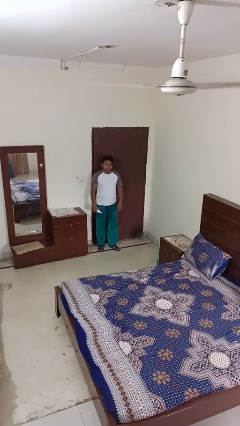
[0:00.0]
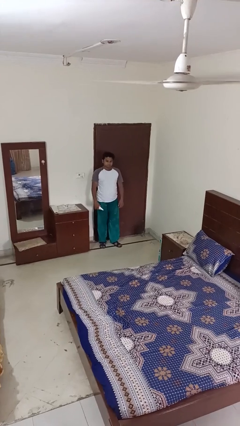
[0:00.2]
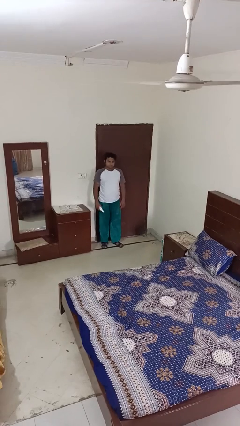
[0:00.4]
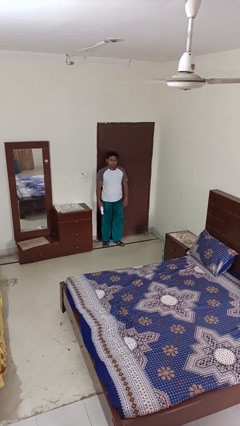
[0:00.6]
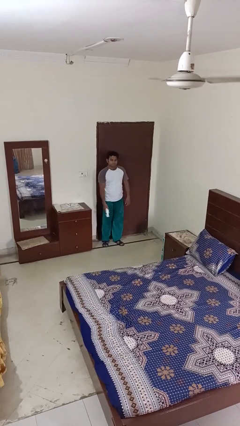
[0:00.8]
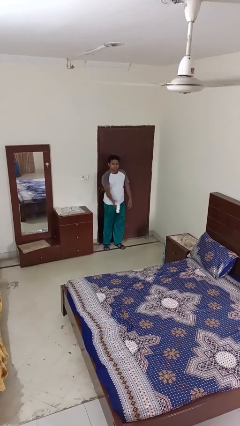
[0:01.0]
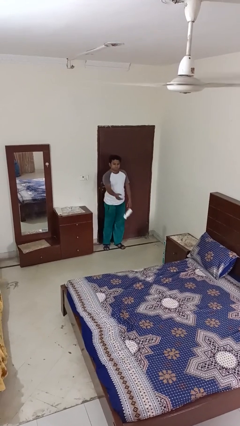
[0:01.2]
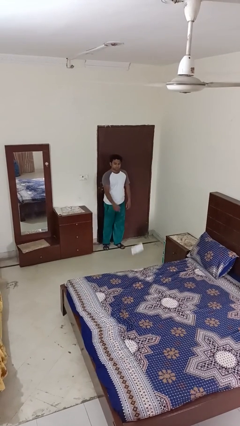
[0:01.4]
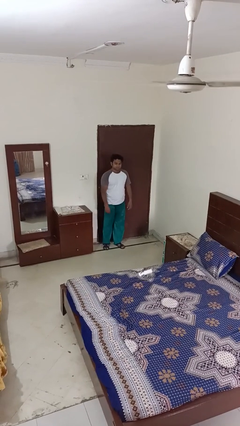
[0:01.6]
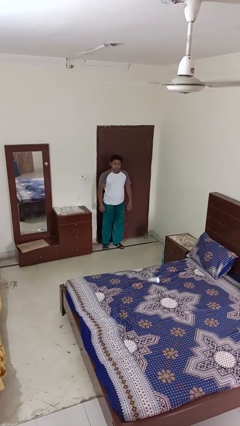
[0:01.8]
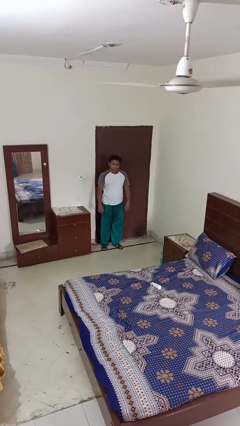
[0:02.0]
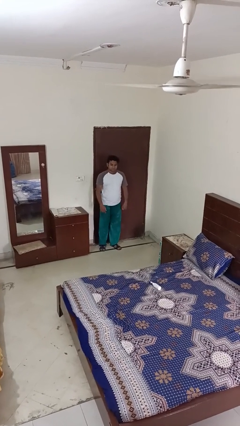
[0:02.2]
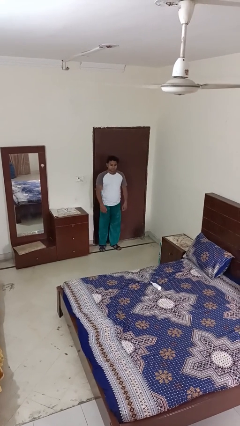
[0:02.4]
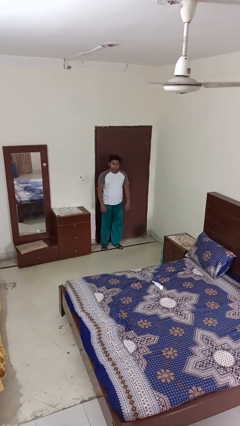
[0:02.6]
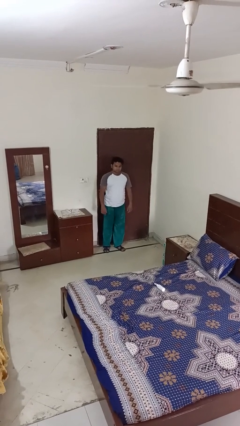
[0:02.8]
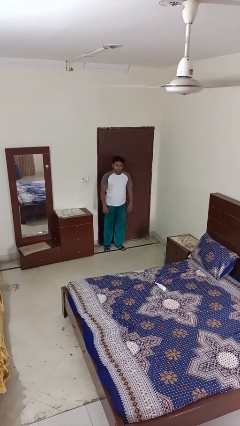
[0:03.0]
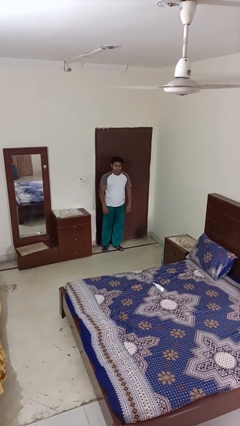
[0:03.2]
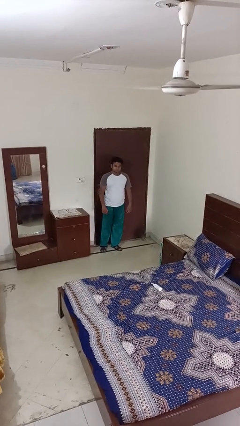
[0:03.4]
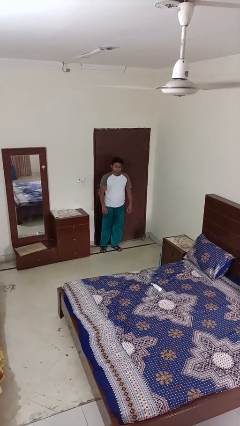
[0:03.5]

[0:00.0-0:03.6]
person throws object on bed

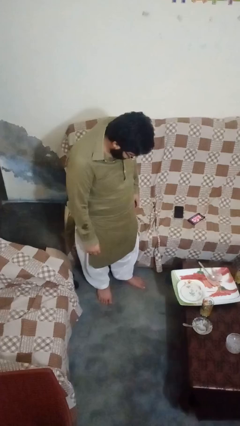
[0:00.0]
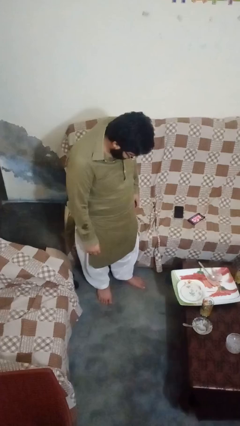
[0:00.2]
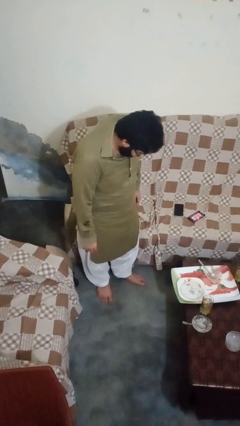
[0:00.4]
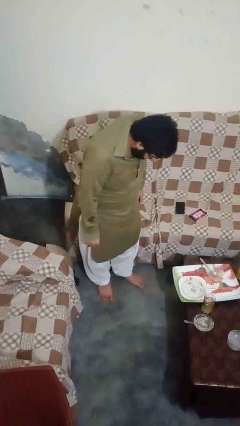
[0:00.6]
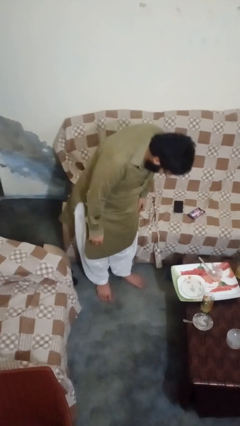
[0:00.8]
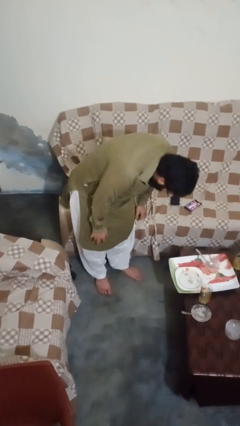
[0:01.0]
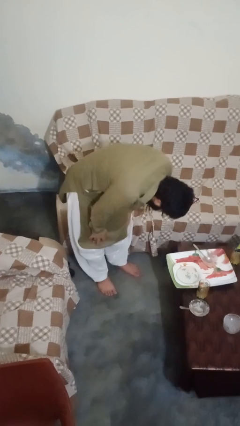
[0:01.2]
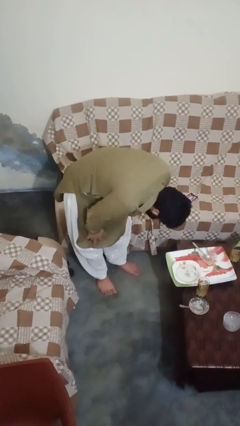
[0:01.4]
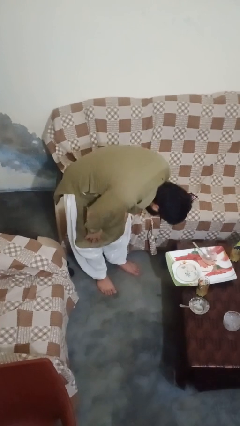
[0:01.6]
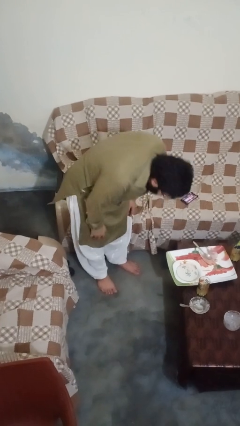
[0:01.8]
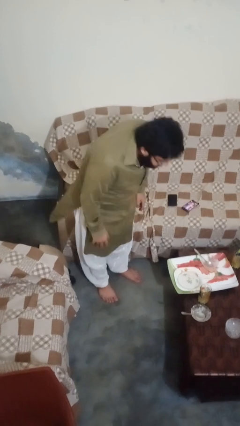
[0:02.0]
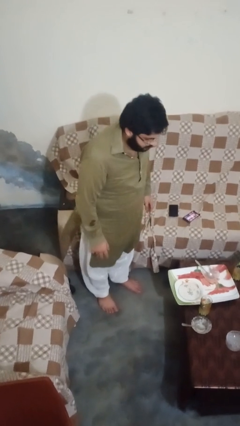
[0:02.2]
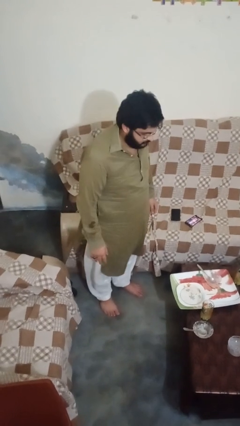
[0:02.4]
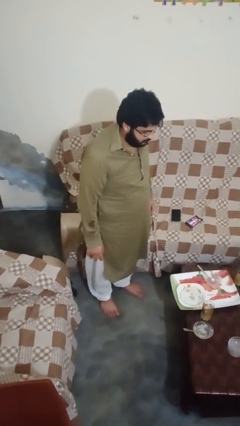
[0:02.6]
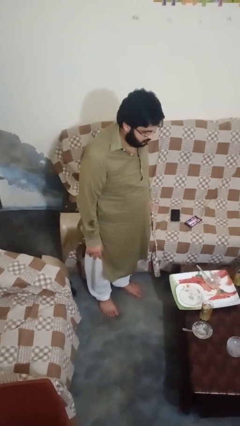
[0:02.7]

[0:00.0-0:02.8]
person bows

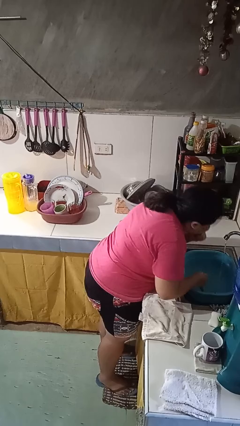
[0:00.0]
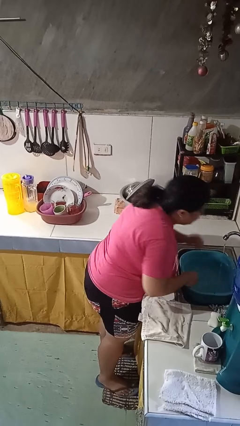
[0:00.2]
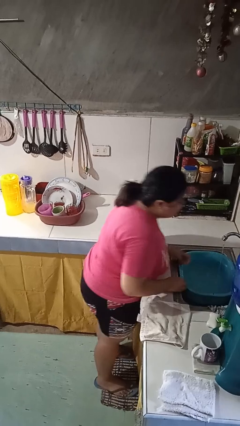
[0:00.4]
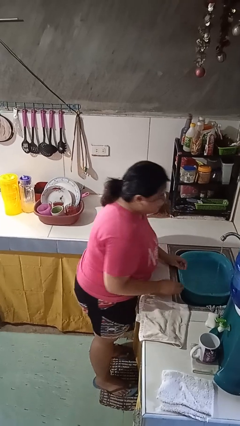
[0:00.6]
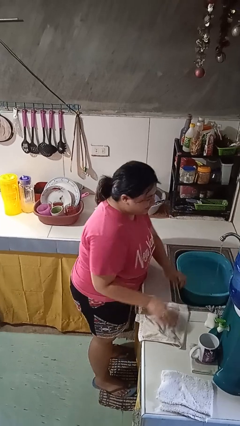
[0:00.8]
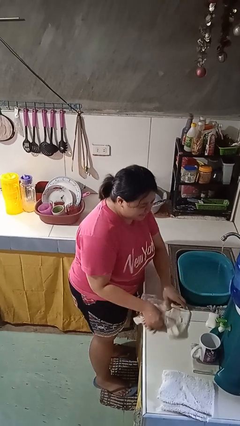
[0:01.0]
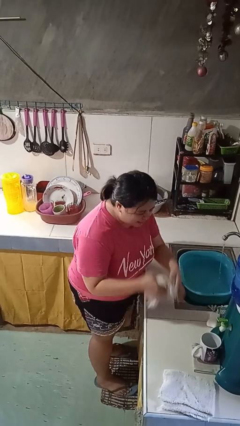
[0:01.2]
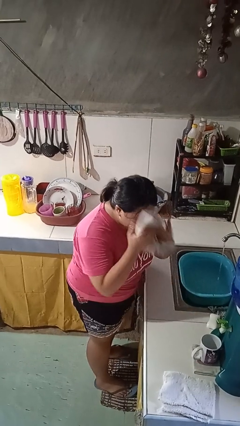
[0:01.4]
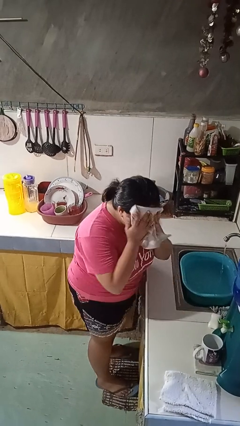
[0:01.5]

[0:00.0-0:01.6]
person dries face with towel

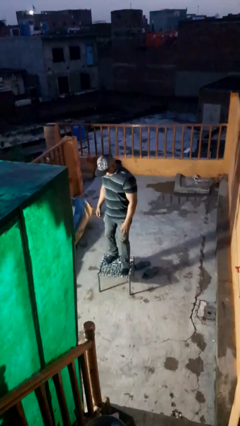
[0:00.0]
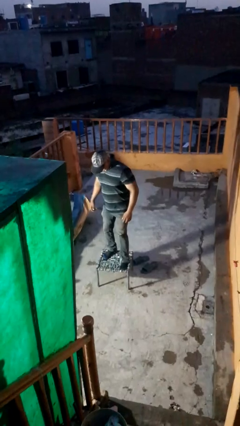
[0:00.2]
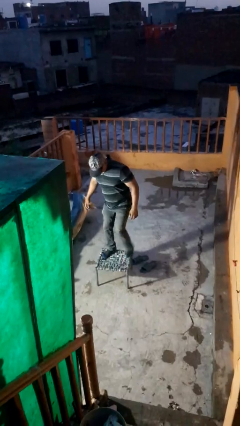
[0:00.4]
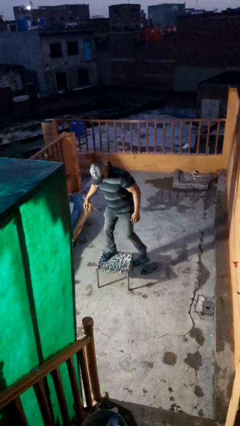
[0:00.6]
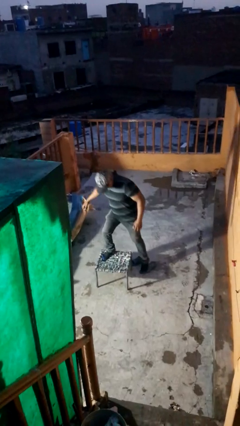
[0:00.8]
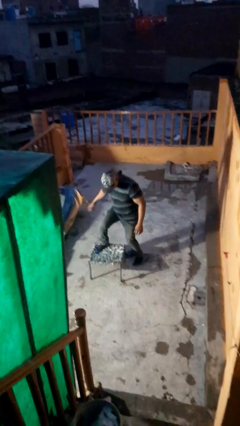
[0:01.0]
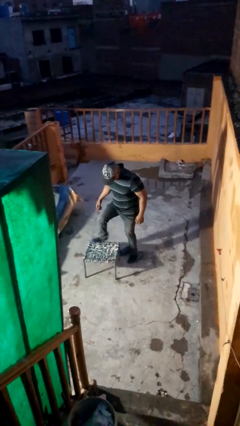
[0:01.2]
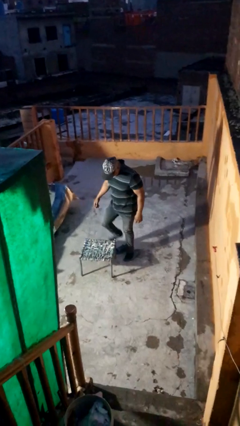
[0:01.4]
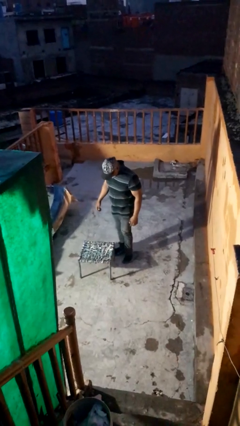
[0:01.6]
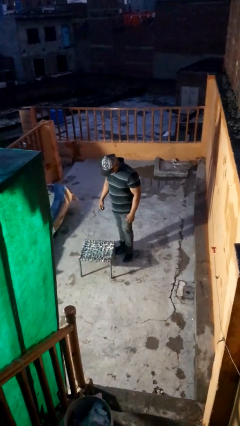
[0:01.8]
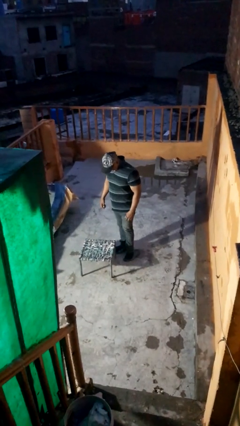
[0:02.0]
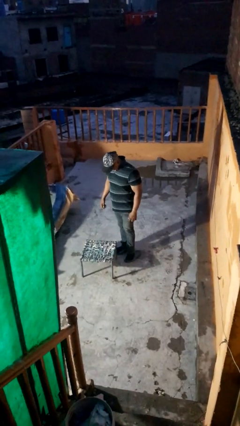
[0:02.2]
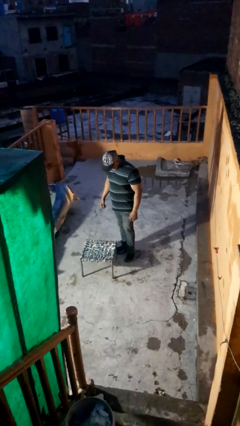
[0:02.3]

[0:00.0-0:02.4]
person climbs off table

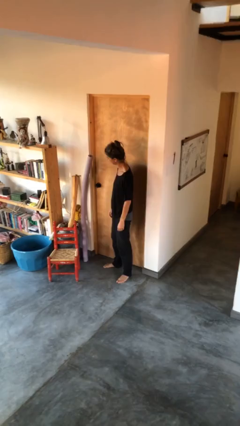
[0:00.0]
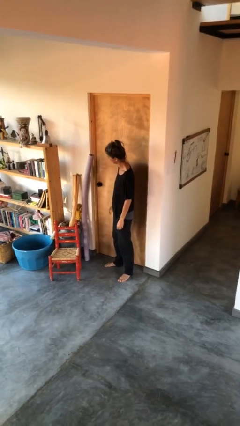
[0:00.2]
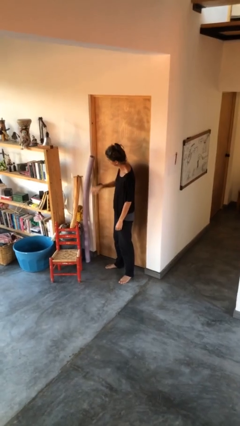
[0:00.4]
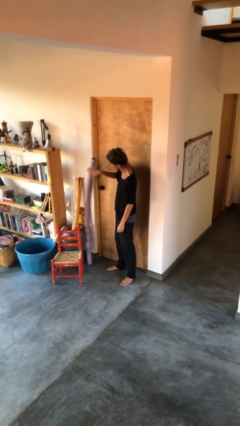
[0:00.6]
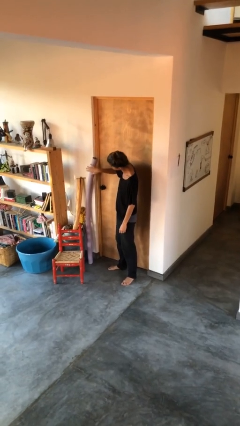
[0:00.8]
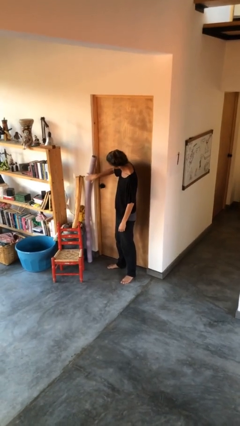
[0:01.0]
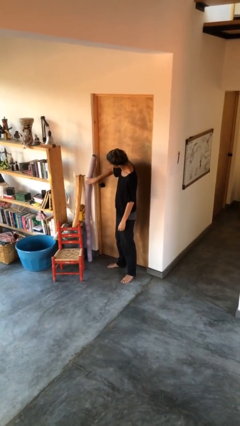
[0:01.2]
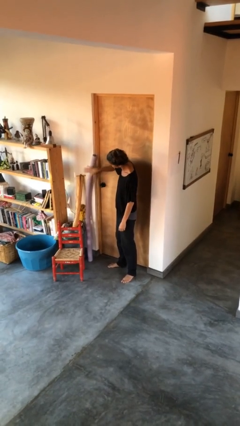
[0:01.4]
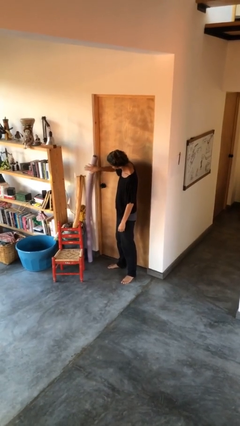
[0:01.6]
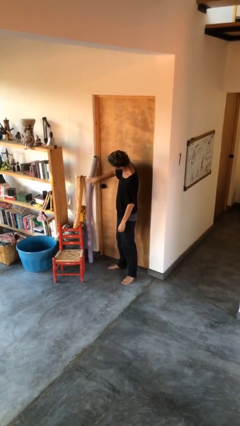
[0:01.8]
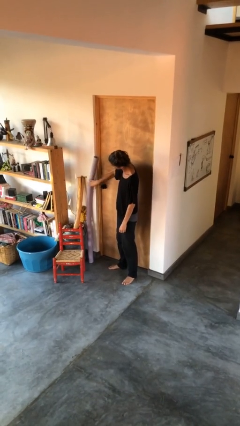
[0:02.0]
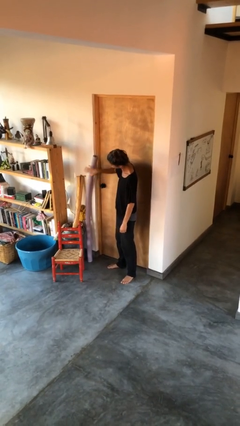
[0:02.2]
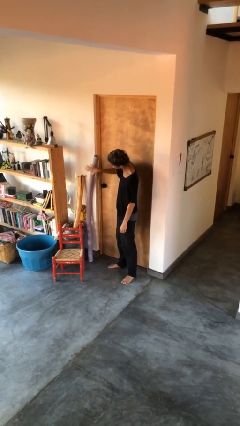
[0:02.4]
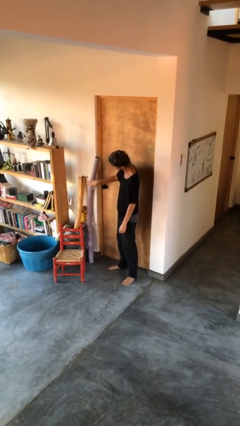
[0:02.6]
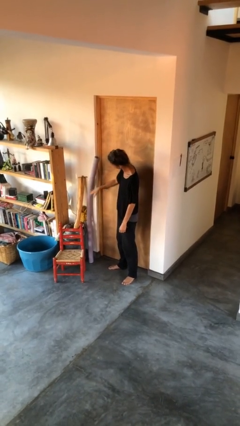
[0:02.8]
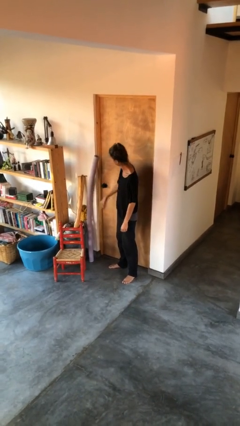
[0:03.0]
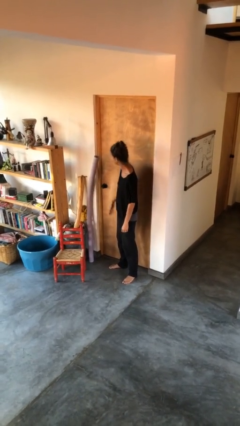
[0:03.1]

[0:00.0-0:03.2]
person waves hand over object

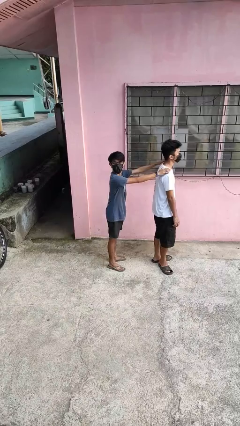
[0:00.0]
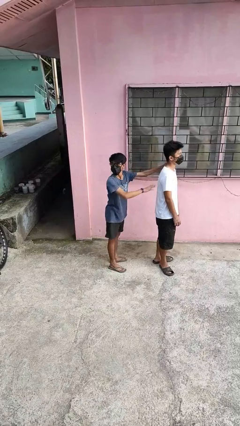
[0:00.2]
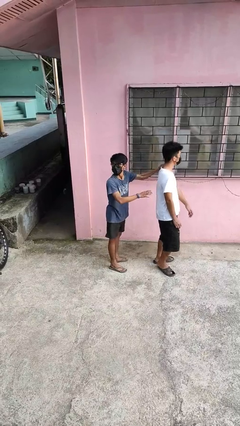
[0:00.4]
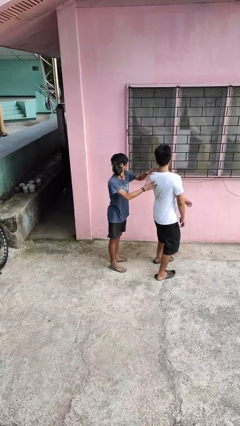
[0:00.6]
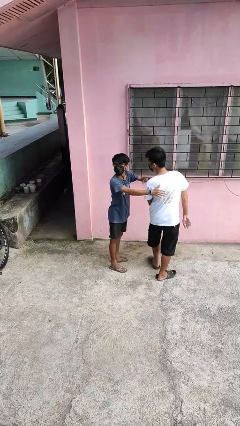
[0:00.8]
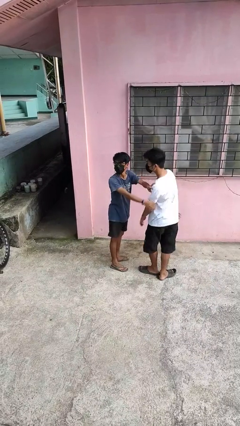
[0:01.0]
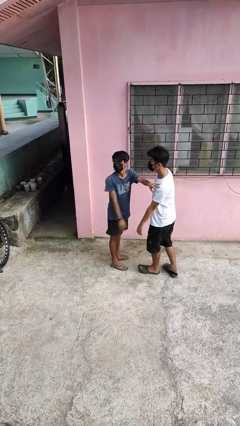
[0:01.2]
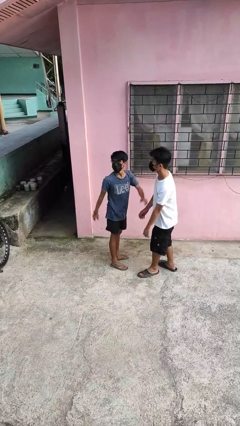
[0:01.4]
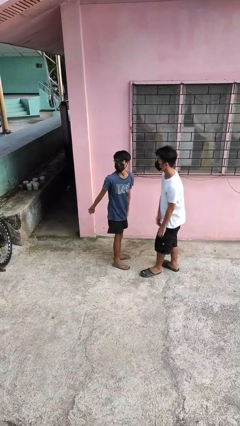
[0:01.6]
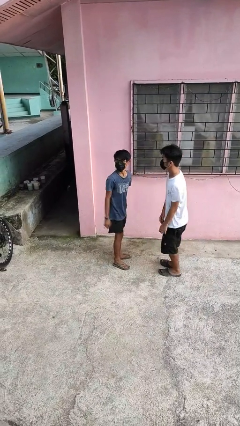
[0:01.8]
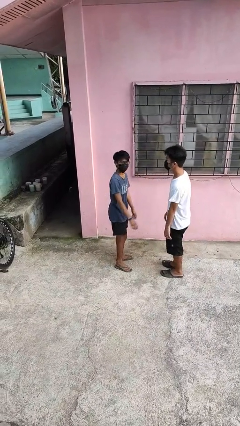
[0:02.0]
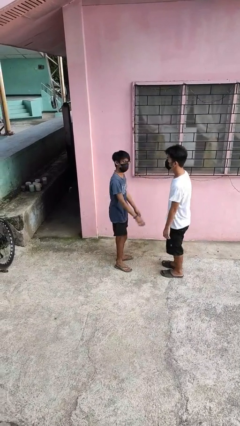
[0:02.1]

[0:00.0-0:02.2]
person spins person around

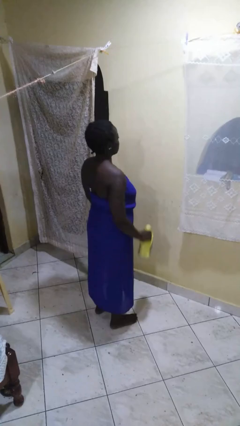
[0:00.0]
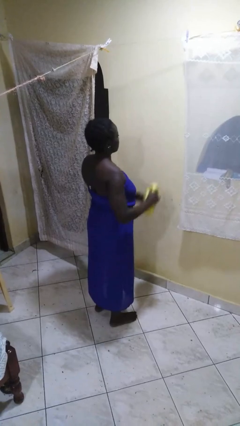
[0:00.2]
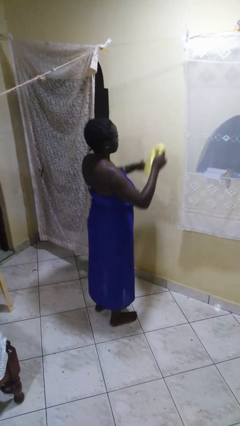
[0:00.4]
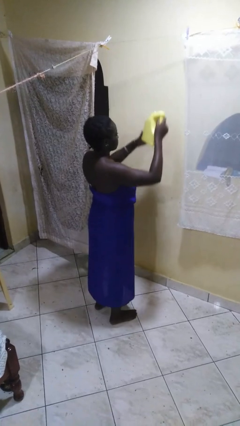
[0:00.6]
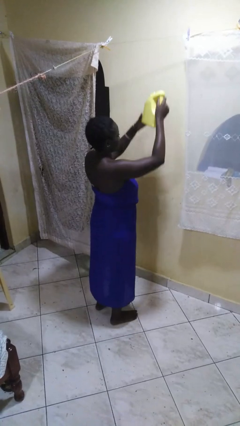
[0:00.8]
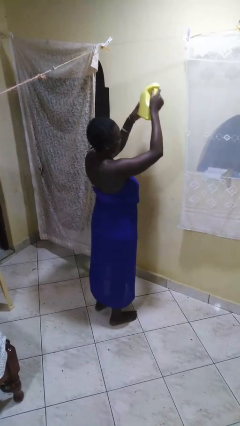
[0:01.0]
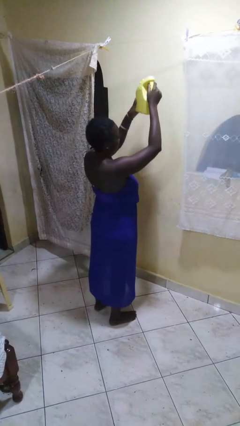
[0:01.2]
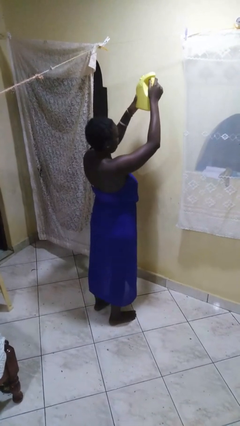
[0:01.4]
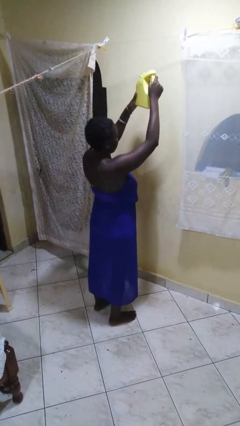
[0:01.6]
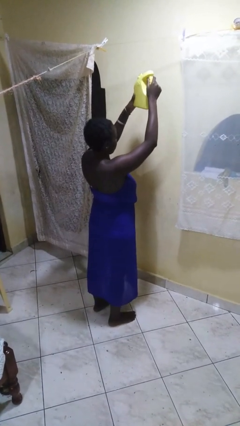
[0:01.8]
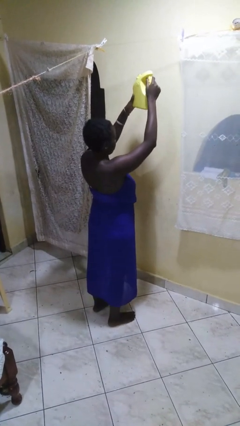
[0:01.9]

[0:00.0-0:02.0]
person holds object above head
